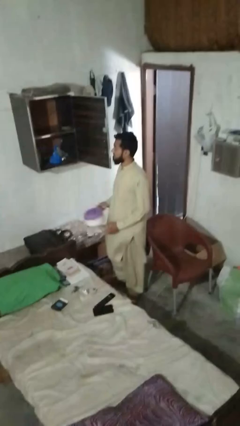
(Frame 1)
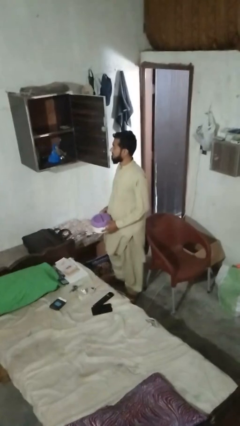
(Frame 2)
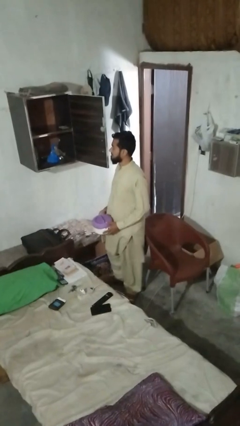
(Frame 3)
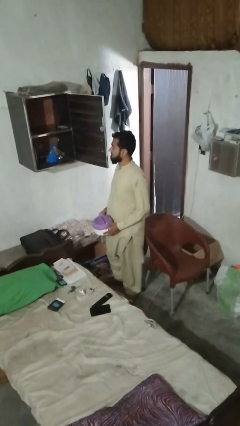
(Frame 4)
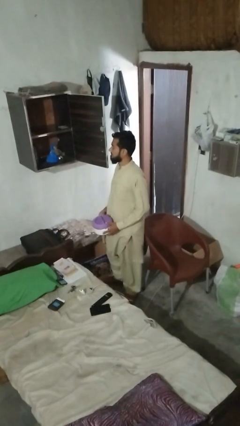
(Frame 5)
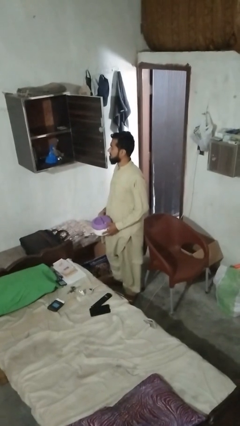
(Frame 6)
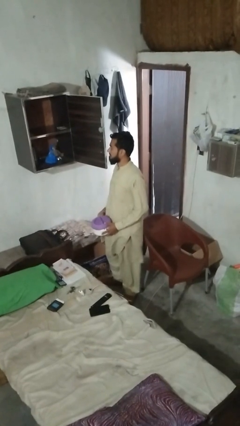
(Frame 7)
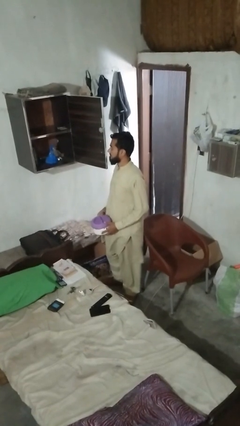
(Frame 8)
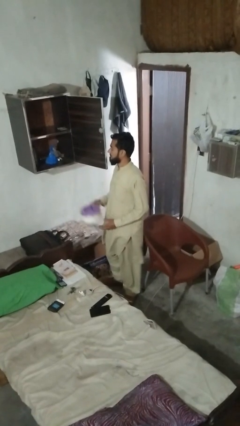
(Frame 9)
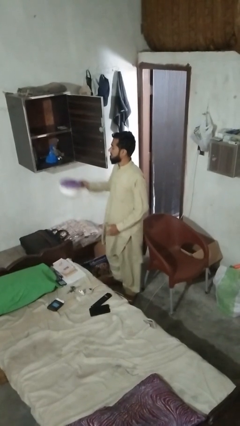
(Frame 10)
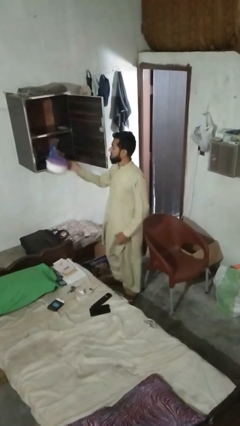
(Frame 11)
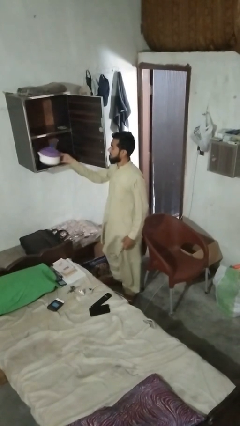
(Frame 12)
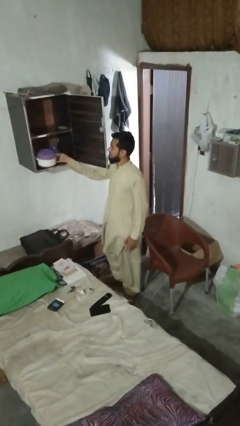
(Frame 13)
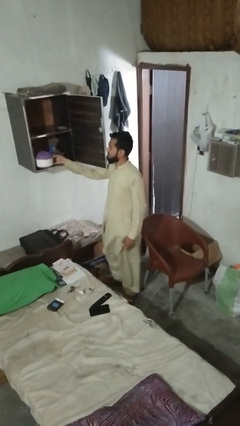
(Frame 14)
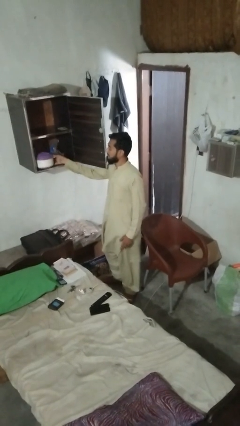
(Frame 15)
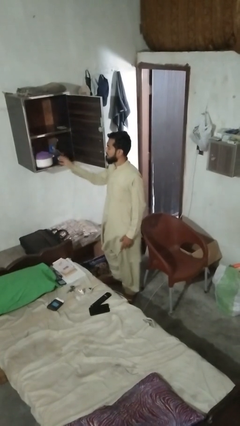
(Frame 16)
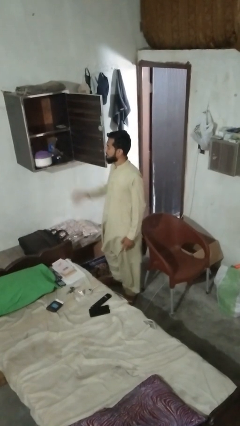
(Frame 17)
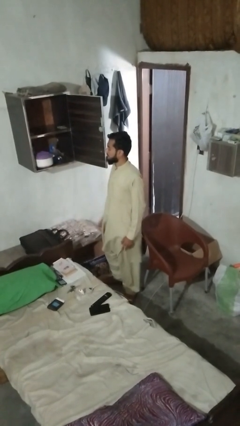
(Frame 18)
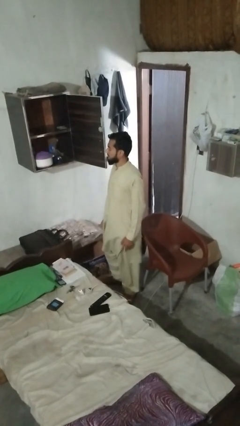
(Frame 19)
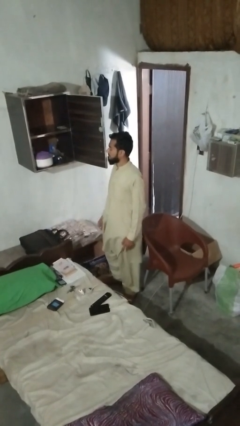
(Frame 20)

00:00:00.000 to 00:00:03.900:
person loads groceries into cabinet

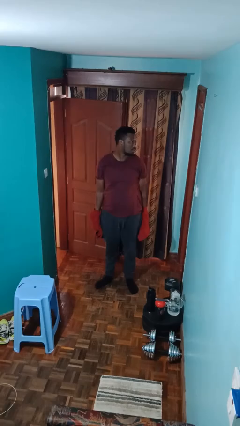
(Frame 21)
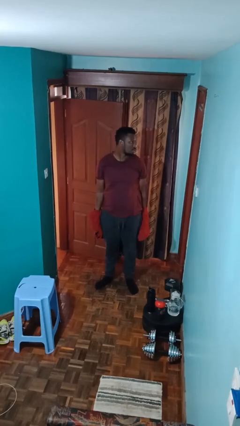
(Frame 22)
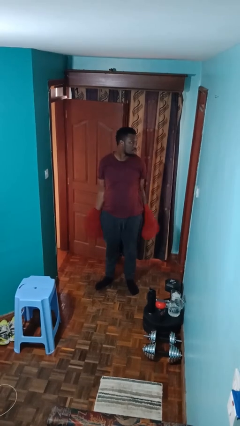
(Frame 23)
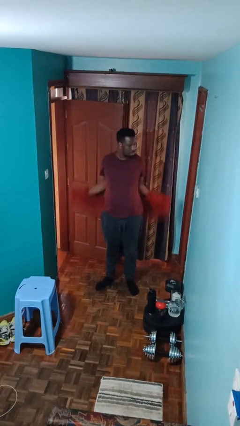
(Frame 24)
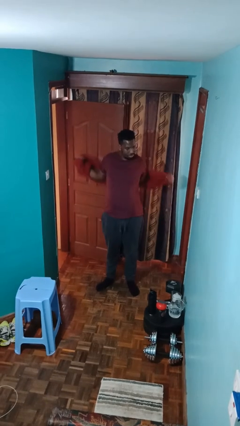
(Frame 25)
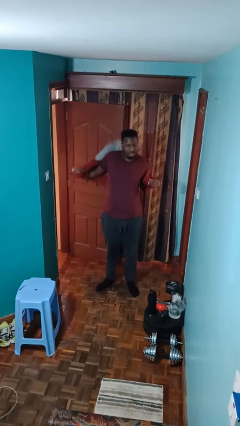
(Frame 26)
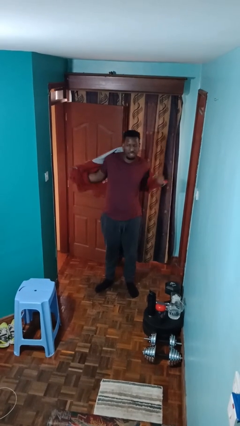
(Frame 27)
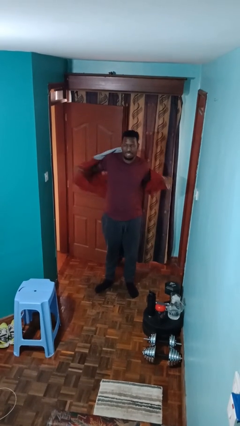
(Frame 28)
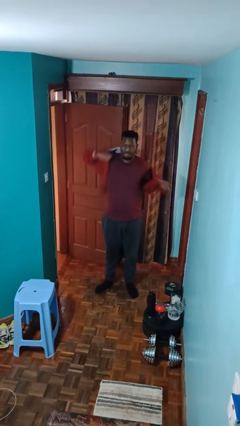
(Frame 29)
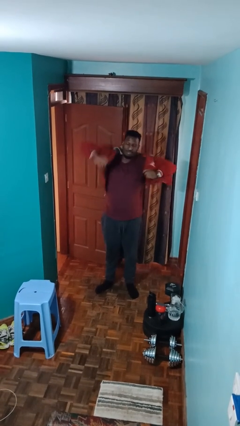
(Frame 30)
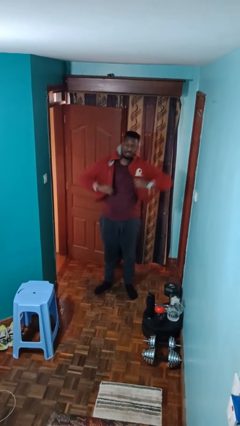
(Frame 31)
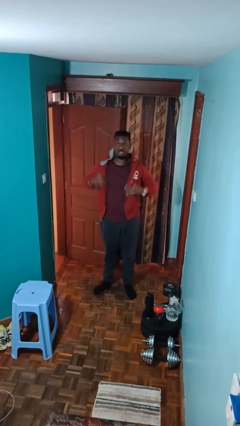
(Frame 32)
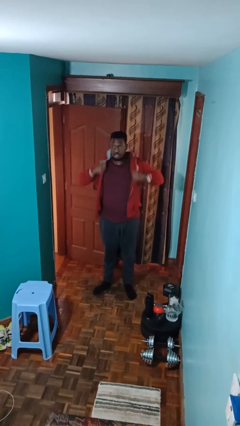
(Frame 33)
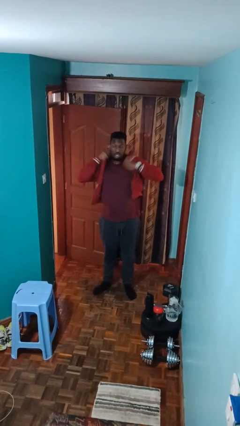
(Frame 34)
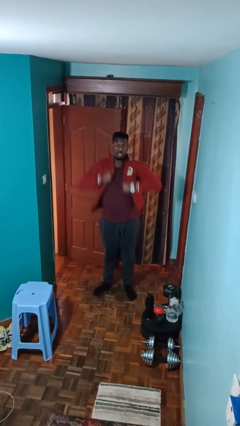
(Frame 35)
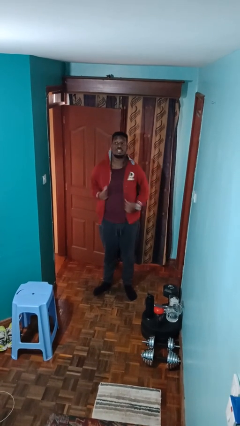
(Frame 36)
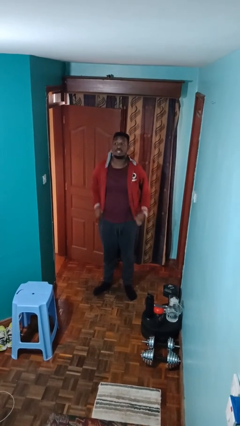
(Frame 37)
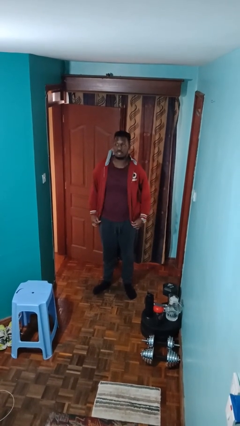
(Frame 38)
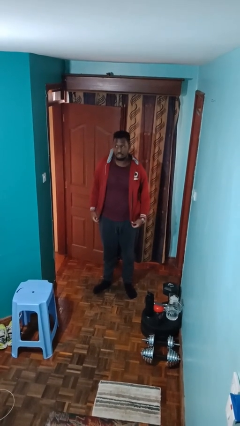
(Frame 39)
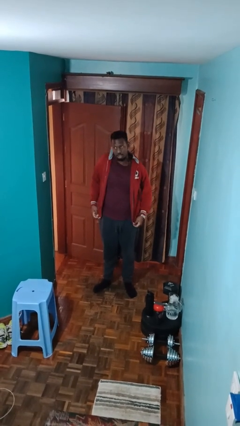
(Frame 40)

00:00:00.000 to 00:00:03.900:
person puts on jacket

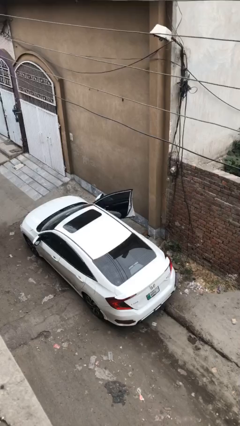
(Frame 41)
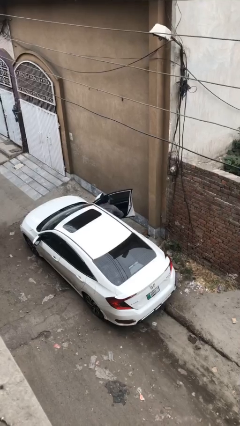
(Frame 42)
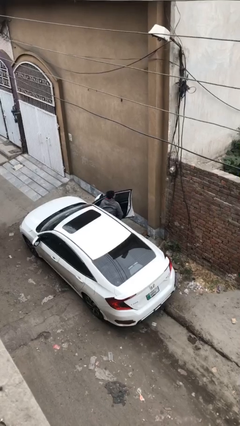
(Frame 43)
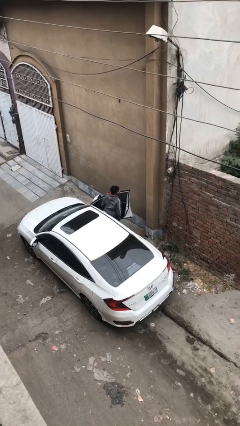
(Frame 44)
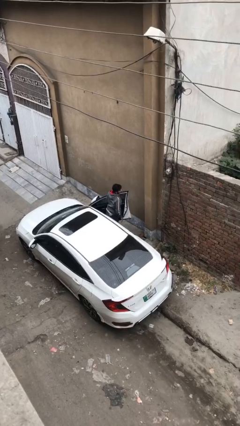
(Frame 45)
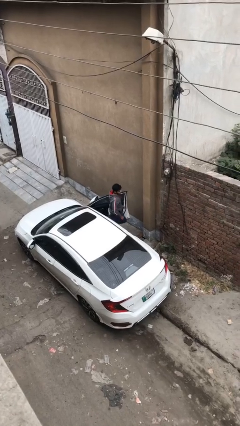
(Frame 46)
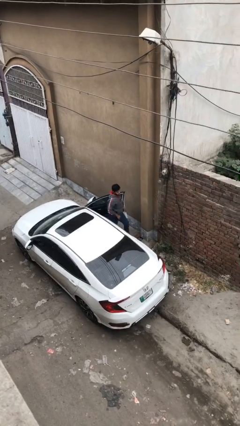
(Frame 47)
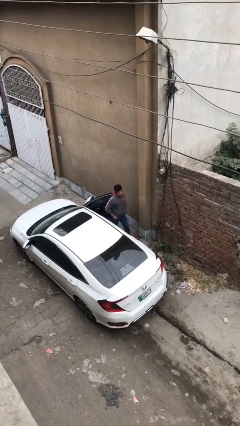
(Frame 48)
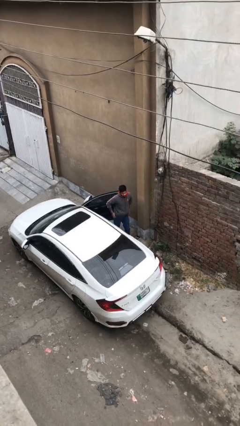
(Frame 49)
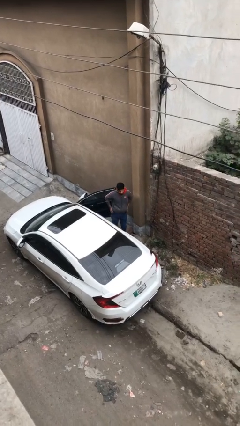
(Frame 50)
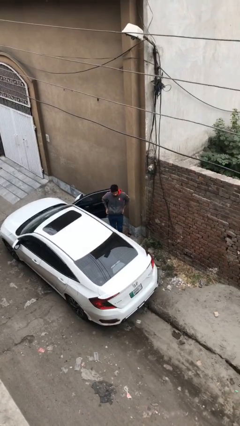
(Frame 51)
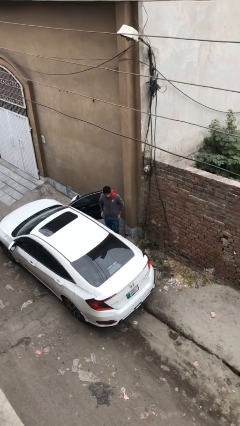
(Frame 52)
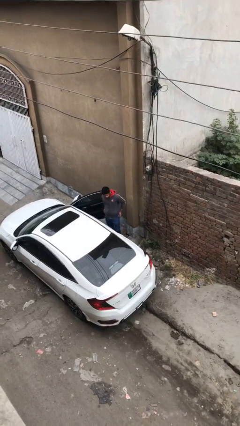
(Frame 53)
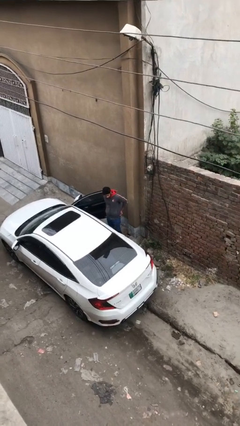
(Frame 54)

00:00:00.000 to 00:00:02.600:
person exits car

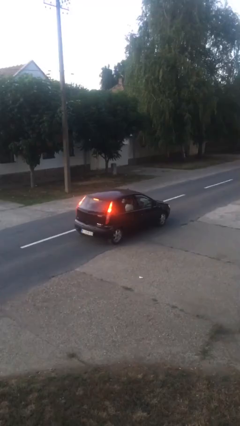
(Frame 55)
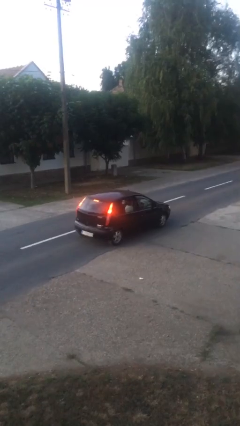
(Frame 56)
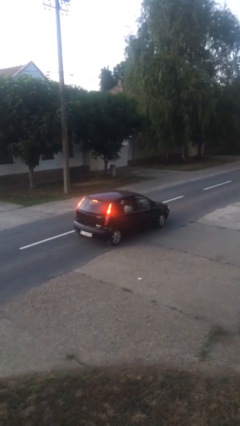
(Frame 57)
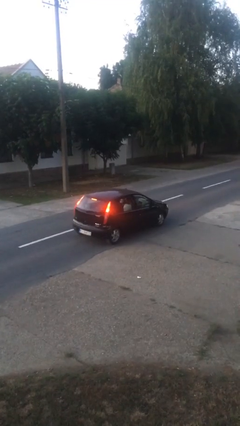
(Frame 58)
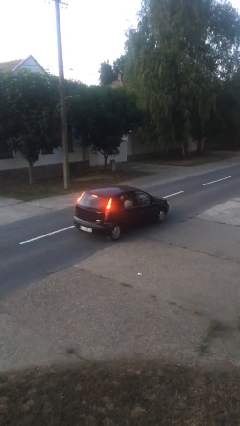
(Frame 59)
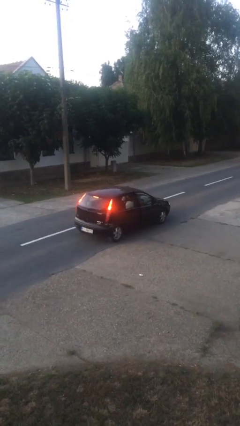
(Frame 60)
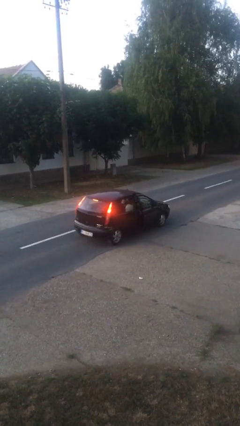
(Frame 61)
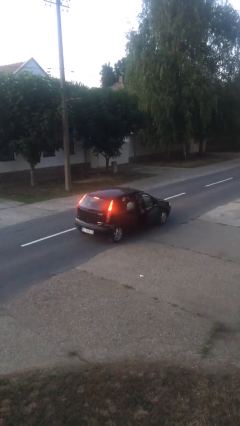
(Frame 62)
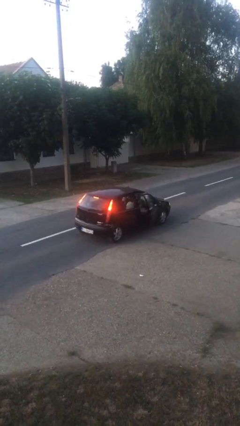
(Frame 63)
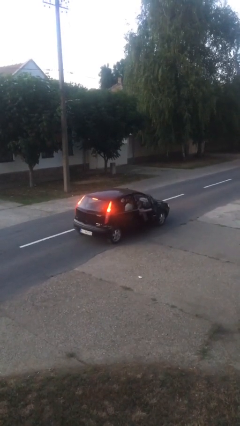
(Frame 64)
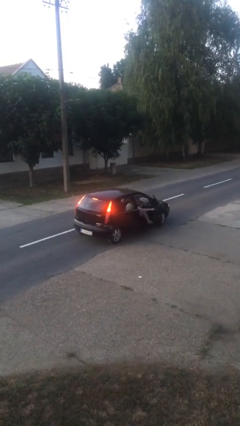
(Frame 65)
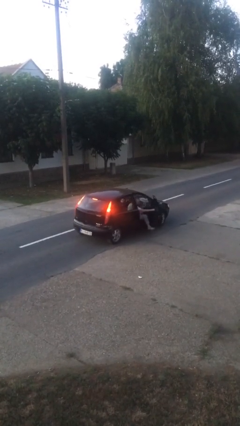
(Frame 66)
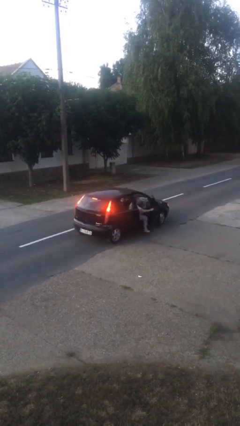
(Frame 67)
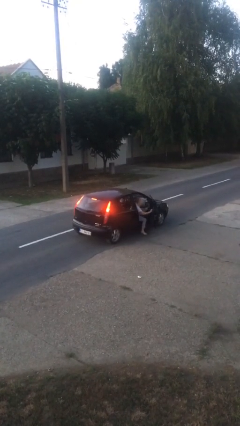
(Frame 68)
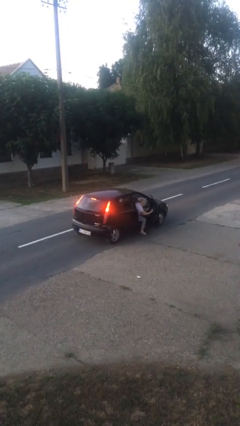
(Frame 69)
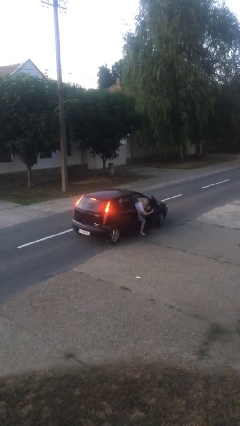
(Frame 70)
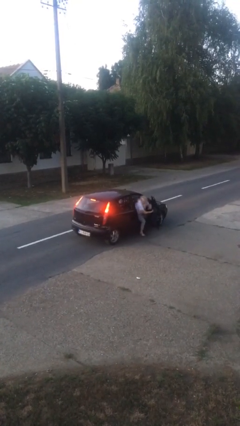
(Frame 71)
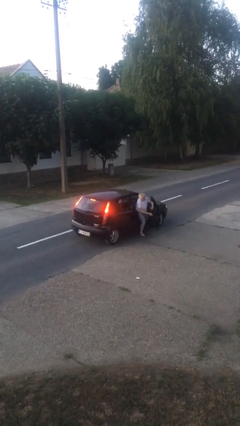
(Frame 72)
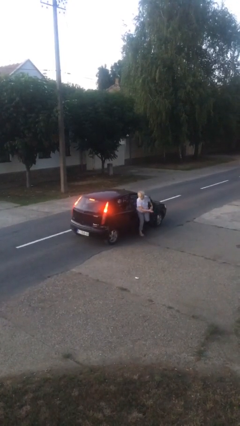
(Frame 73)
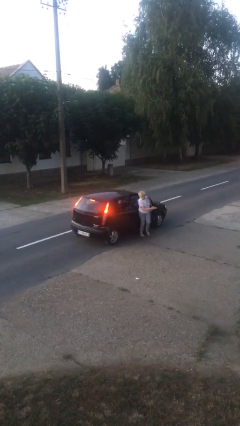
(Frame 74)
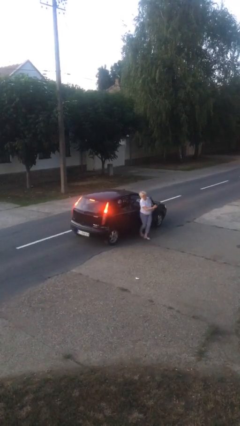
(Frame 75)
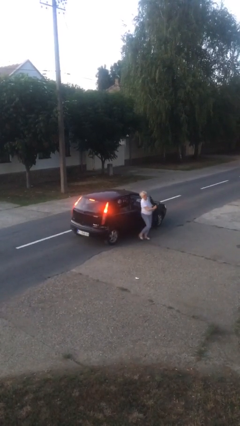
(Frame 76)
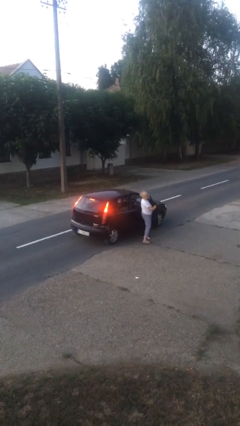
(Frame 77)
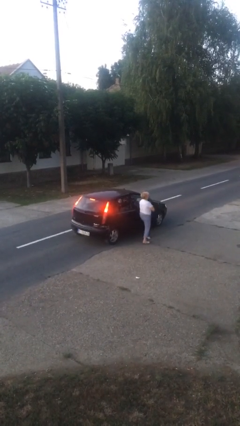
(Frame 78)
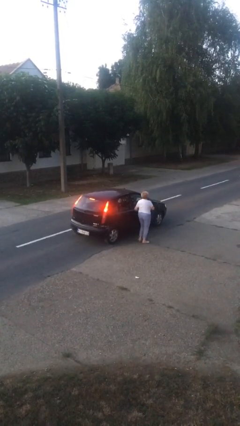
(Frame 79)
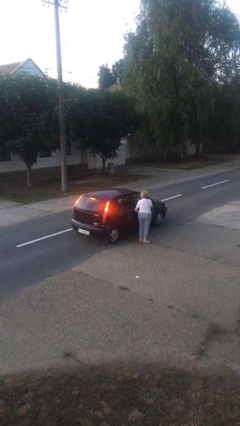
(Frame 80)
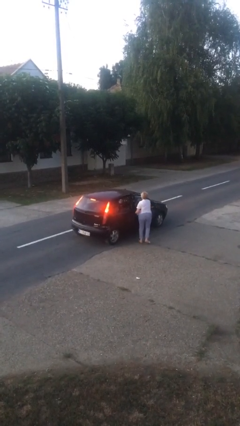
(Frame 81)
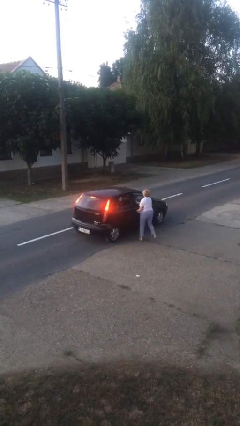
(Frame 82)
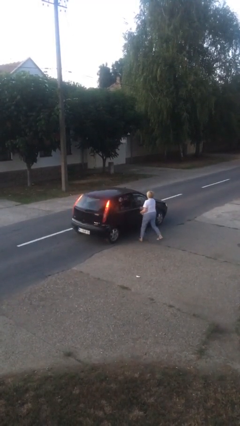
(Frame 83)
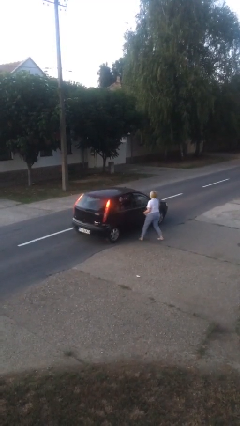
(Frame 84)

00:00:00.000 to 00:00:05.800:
car drops off person

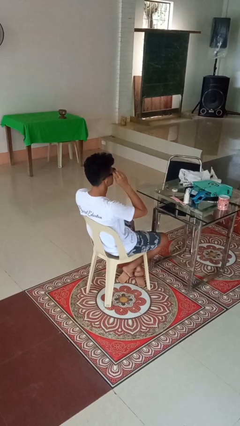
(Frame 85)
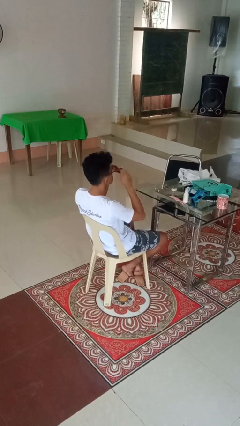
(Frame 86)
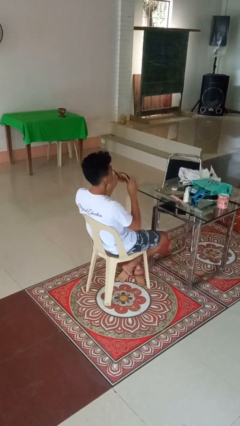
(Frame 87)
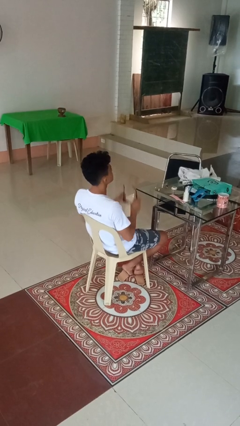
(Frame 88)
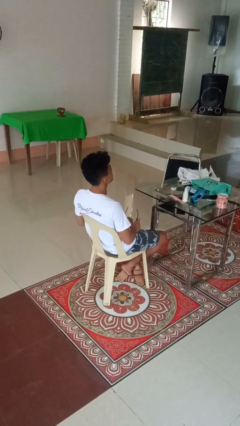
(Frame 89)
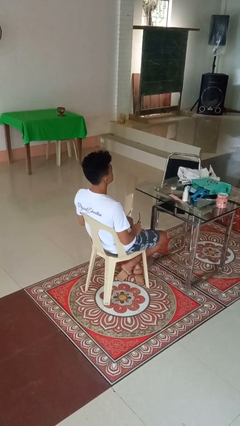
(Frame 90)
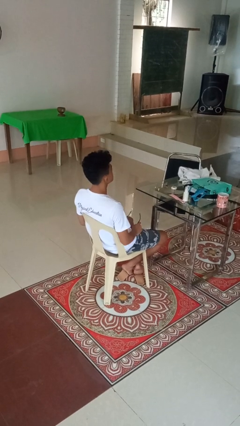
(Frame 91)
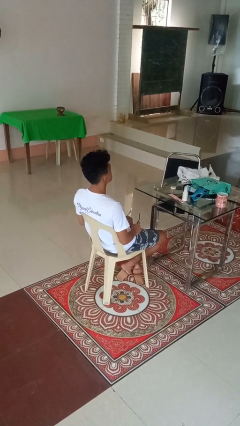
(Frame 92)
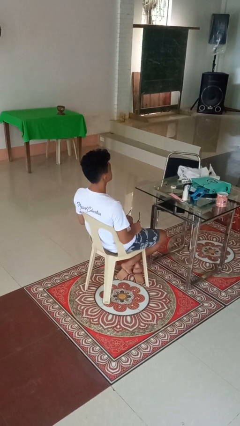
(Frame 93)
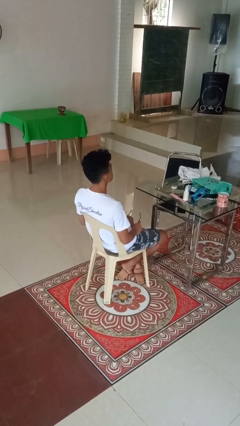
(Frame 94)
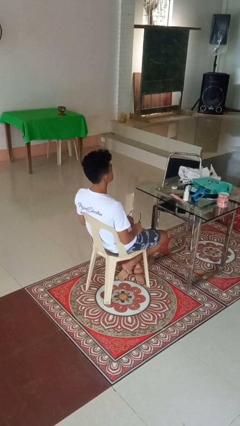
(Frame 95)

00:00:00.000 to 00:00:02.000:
person takes off sunglasses
